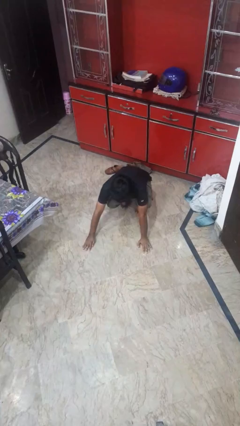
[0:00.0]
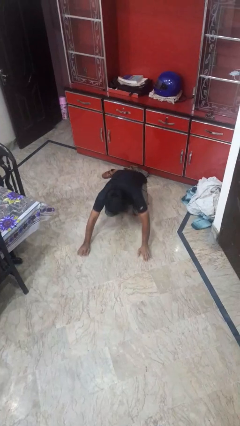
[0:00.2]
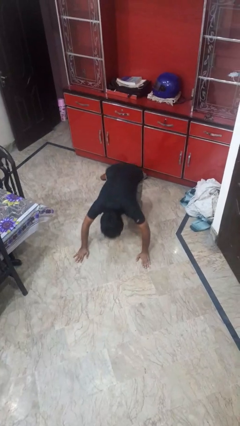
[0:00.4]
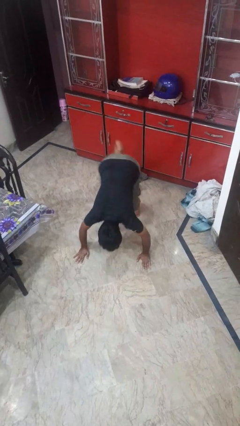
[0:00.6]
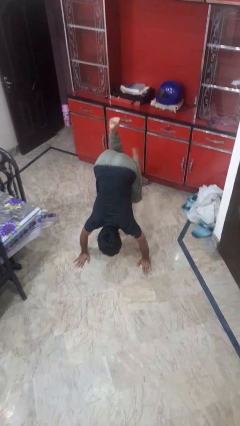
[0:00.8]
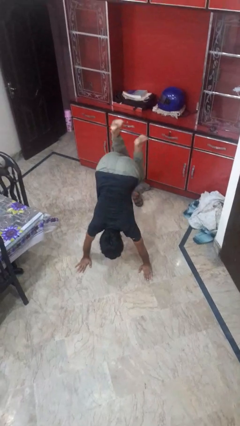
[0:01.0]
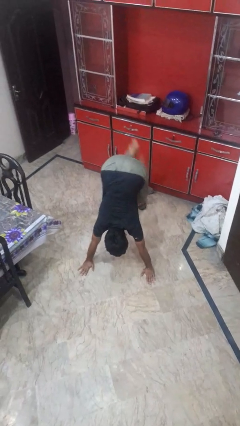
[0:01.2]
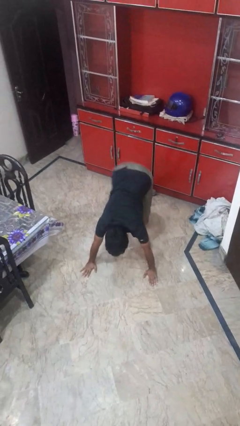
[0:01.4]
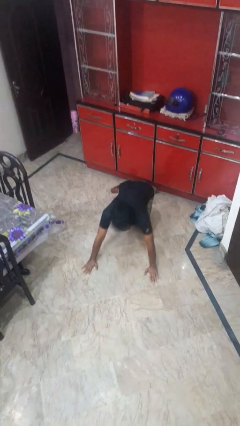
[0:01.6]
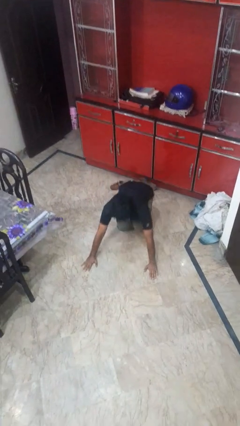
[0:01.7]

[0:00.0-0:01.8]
person handstand

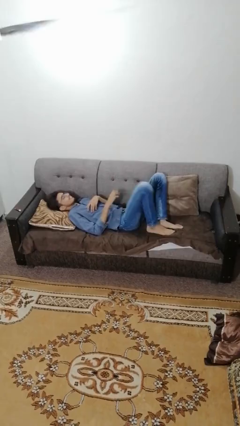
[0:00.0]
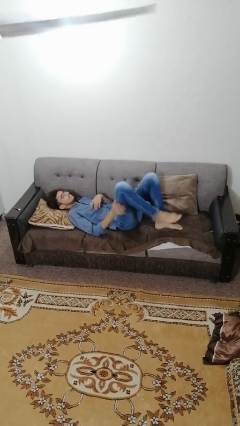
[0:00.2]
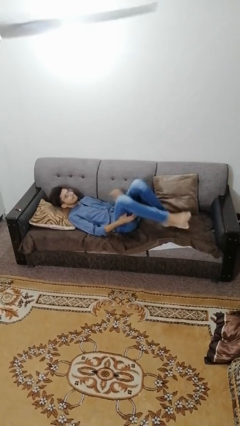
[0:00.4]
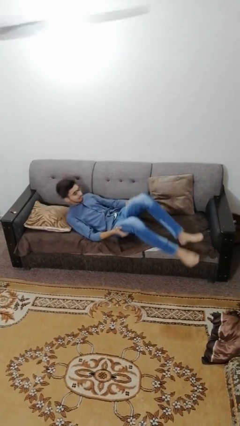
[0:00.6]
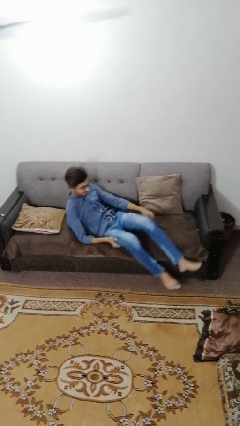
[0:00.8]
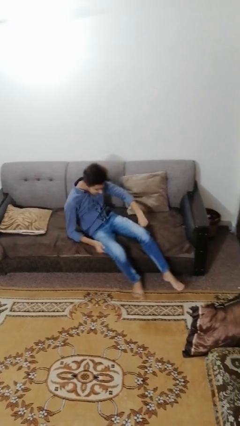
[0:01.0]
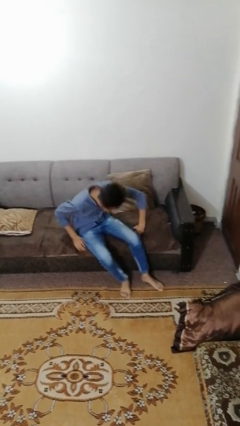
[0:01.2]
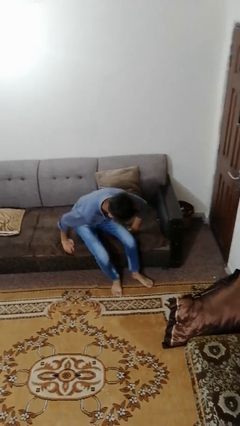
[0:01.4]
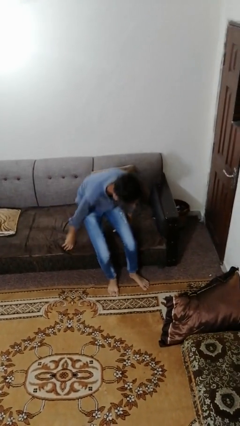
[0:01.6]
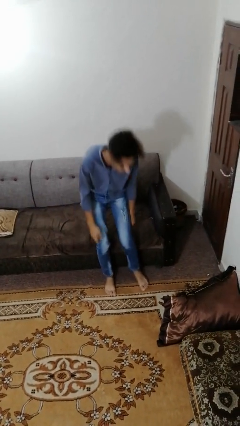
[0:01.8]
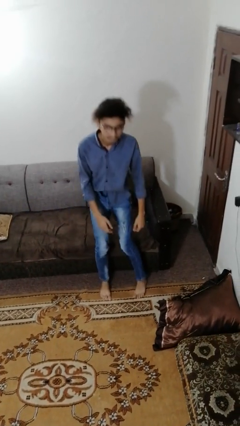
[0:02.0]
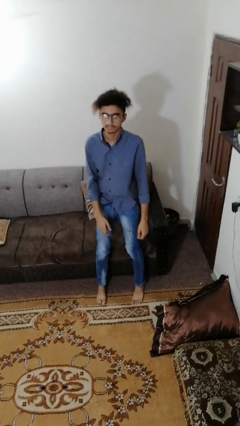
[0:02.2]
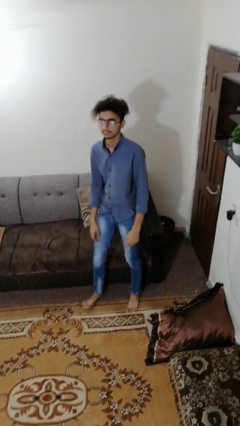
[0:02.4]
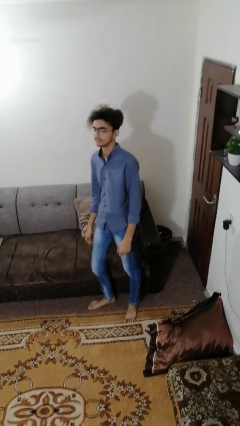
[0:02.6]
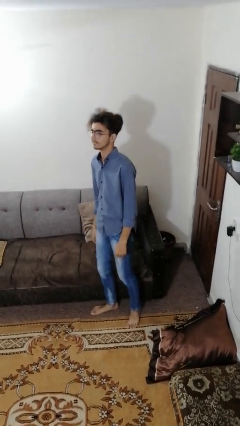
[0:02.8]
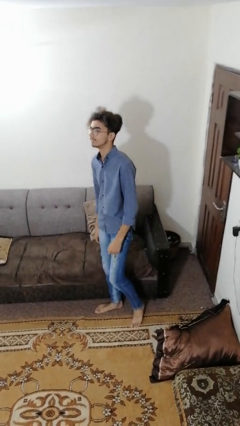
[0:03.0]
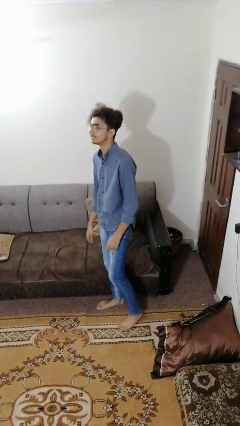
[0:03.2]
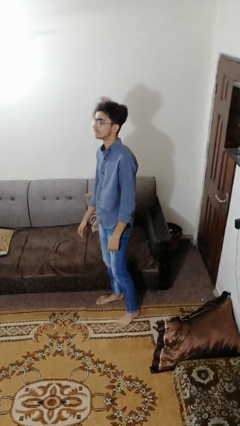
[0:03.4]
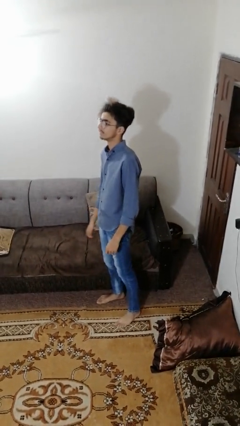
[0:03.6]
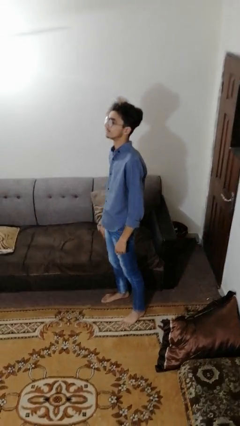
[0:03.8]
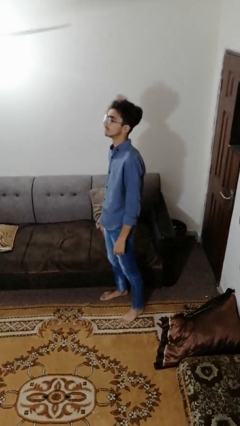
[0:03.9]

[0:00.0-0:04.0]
person stands up

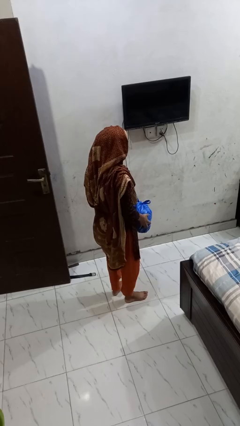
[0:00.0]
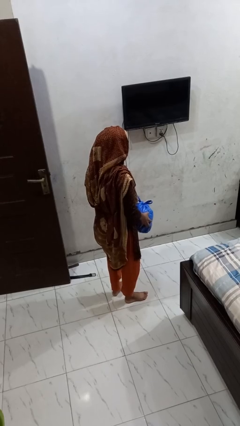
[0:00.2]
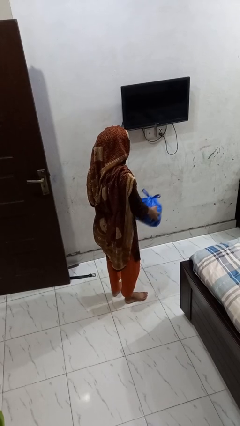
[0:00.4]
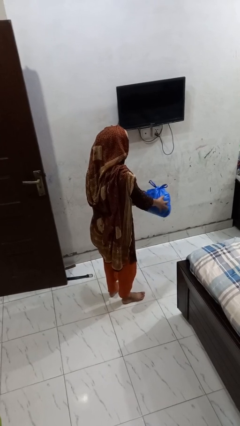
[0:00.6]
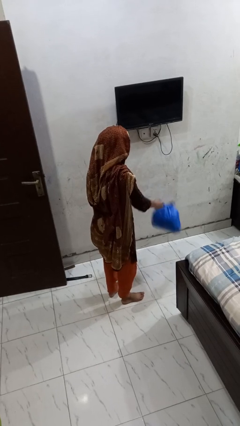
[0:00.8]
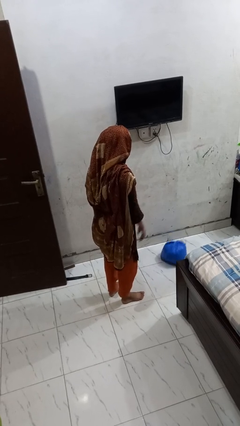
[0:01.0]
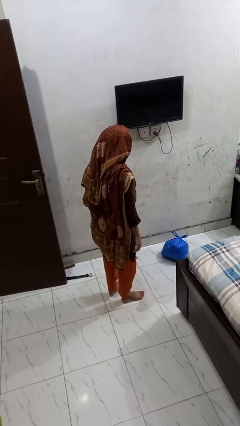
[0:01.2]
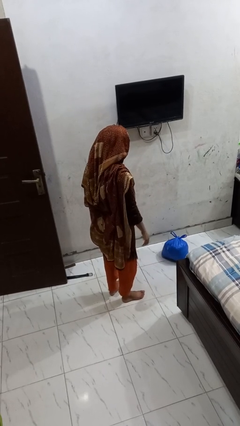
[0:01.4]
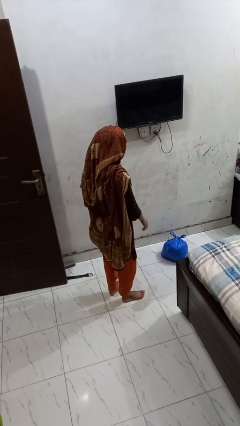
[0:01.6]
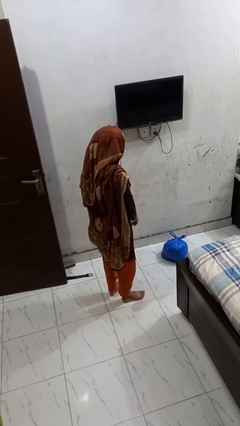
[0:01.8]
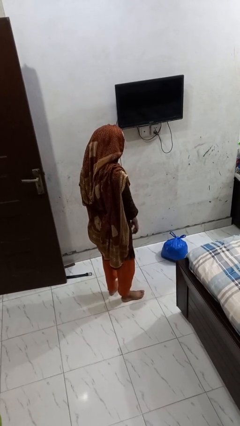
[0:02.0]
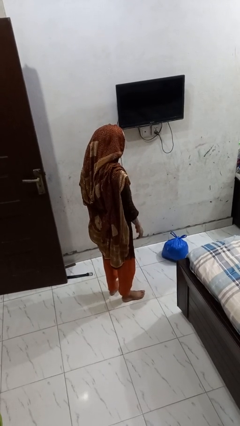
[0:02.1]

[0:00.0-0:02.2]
person throws object to ground

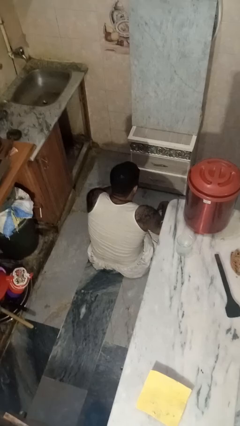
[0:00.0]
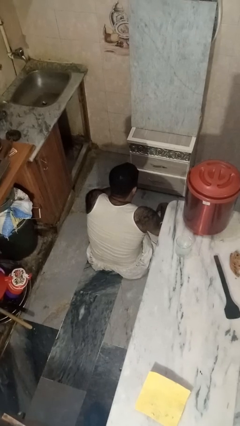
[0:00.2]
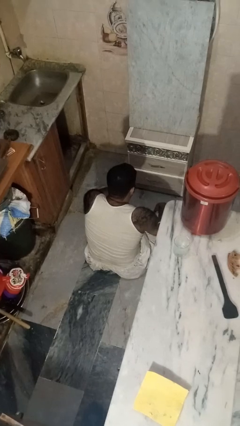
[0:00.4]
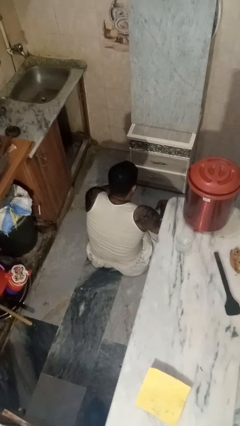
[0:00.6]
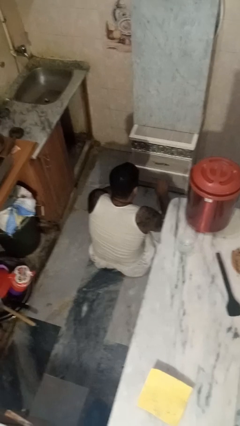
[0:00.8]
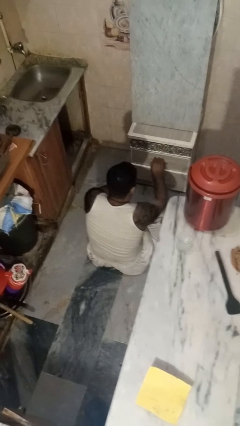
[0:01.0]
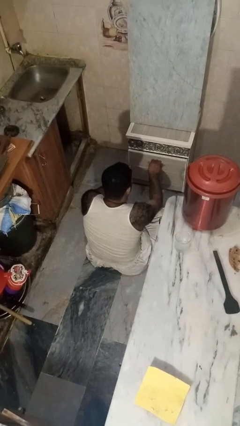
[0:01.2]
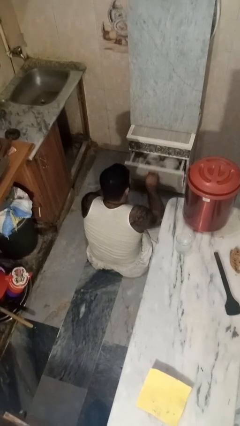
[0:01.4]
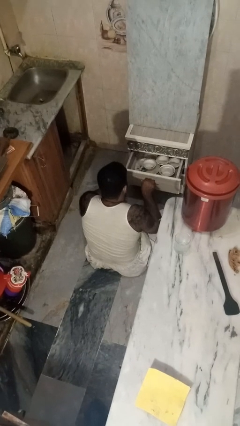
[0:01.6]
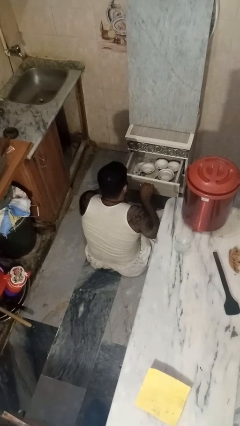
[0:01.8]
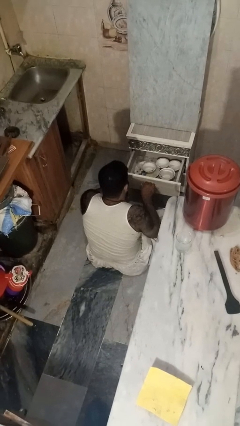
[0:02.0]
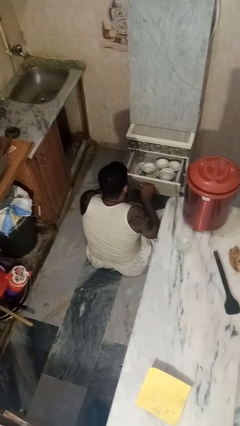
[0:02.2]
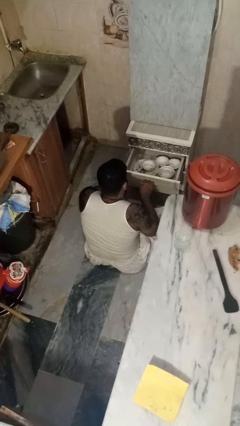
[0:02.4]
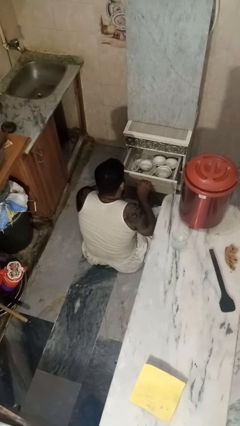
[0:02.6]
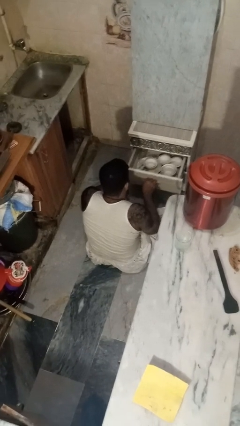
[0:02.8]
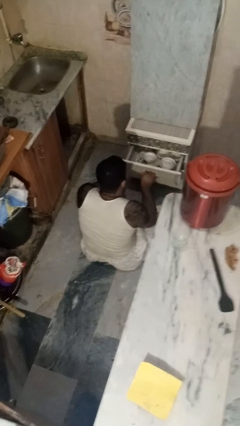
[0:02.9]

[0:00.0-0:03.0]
person opens kitchen drawer

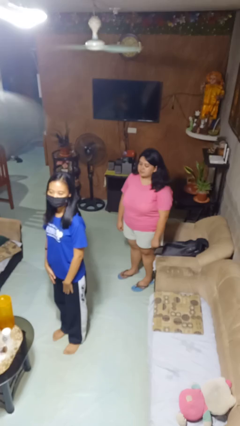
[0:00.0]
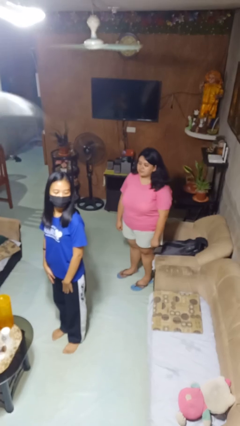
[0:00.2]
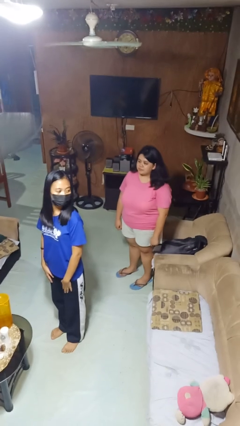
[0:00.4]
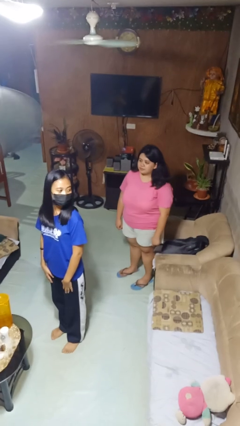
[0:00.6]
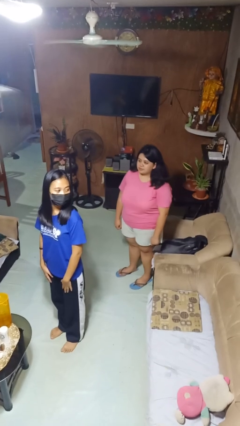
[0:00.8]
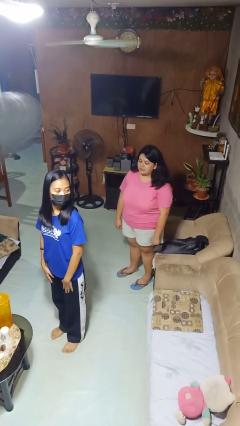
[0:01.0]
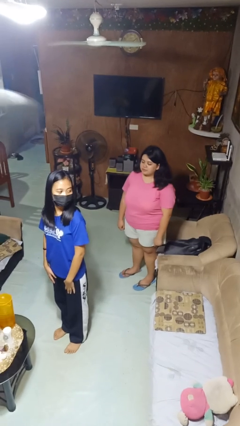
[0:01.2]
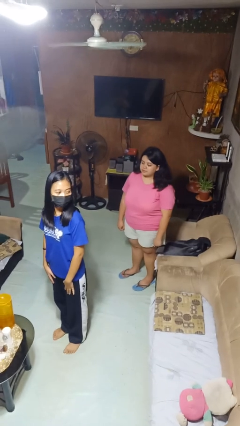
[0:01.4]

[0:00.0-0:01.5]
person looks over shoulder

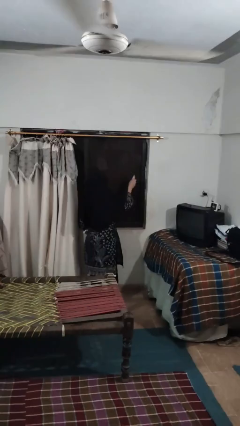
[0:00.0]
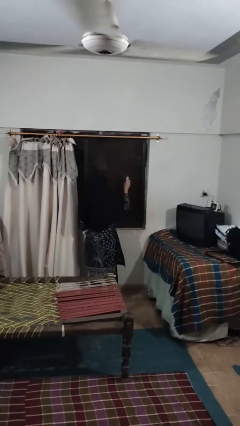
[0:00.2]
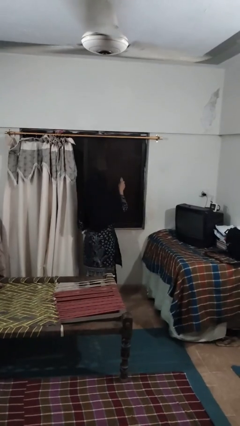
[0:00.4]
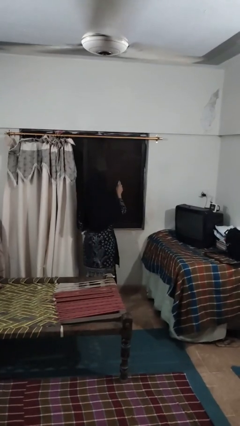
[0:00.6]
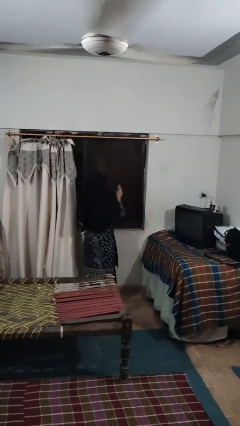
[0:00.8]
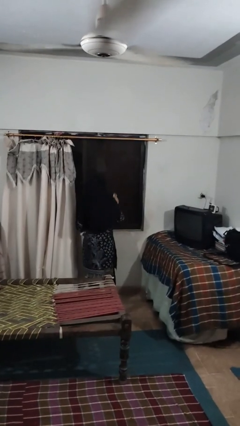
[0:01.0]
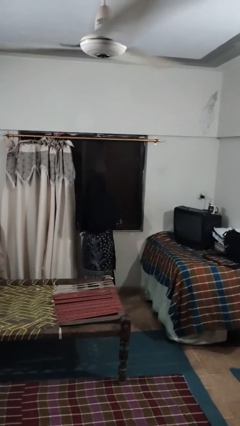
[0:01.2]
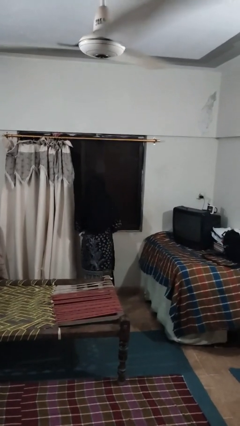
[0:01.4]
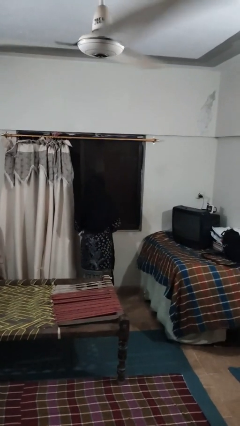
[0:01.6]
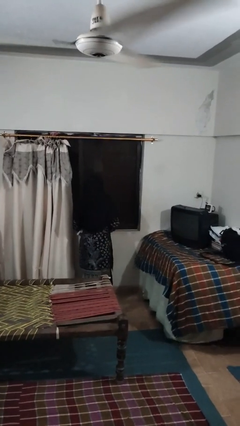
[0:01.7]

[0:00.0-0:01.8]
person sprays from bottle

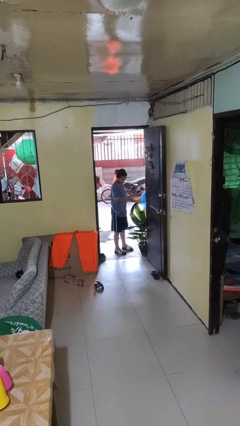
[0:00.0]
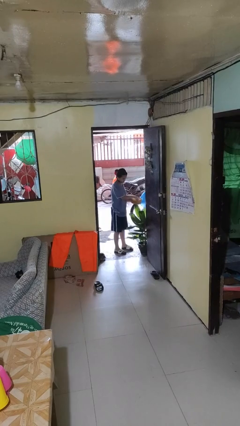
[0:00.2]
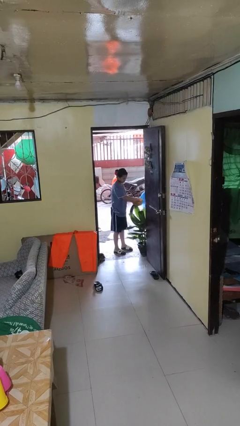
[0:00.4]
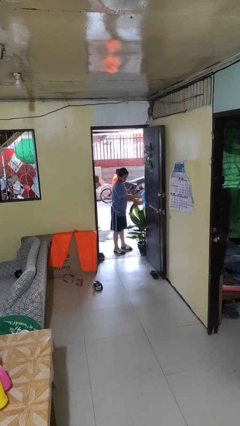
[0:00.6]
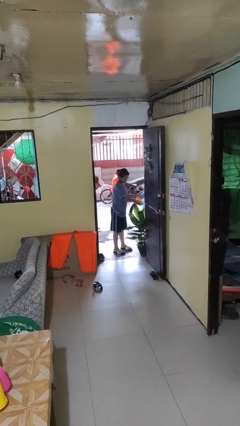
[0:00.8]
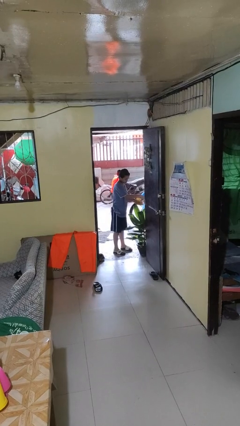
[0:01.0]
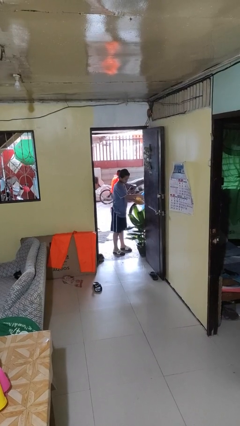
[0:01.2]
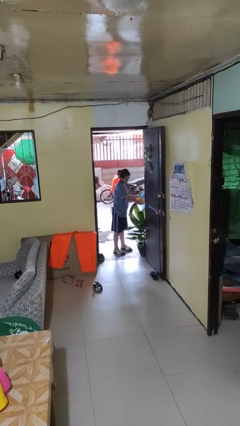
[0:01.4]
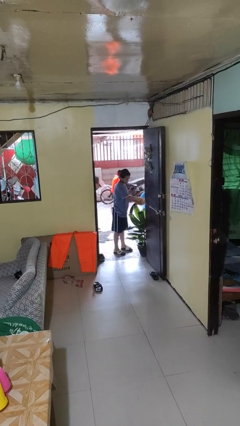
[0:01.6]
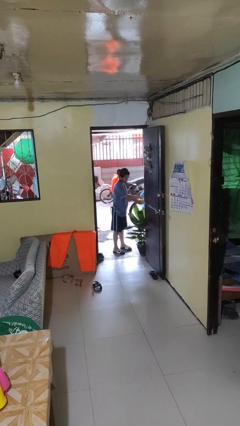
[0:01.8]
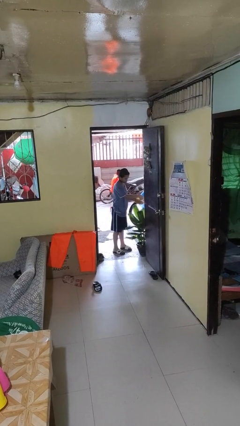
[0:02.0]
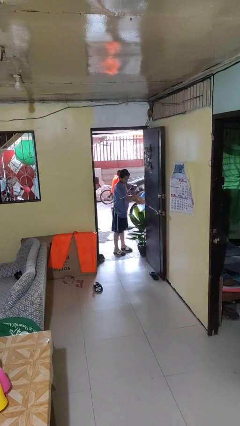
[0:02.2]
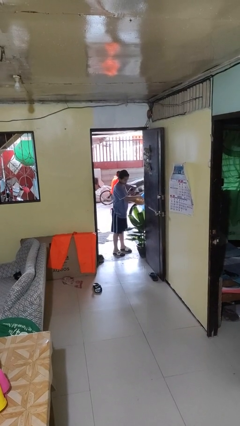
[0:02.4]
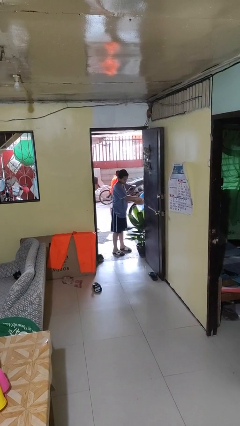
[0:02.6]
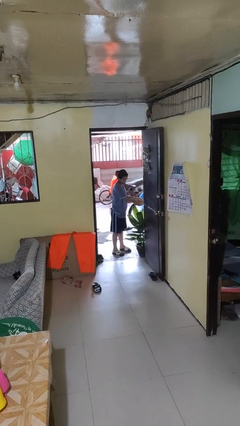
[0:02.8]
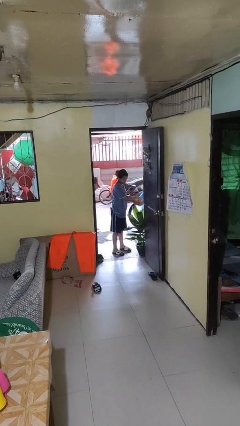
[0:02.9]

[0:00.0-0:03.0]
person waters houseplant
